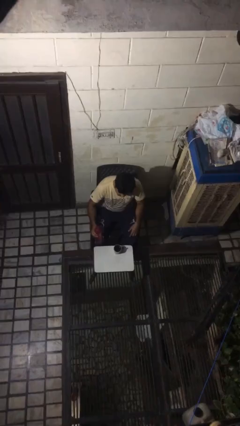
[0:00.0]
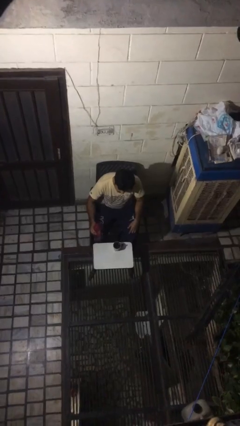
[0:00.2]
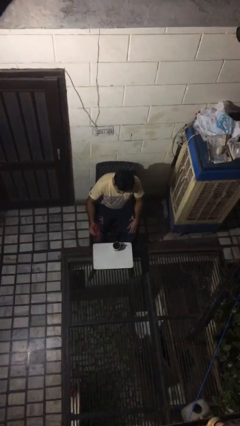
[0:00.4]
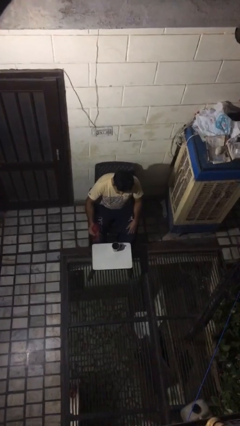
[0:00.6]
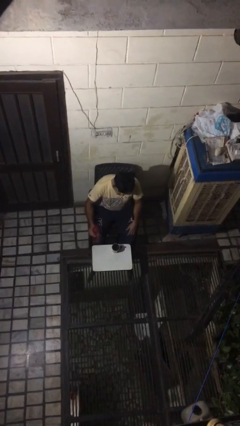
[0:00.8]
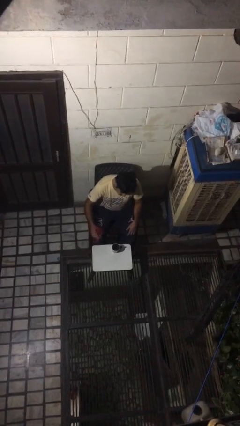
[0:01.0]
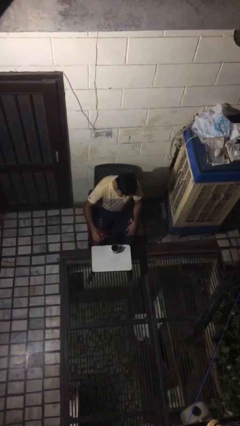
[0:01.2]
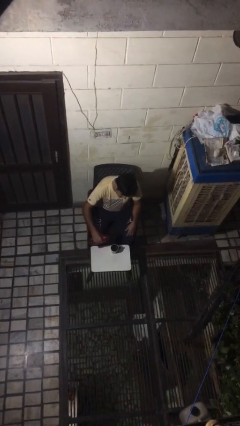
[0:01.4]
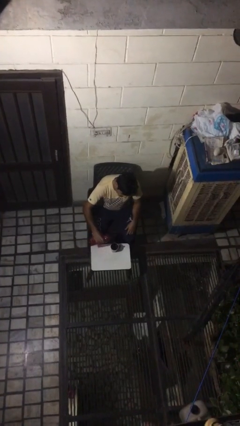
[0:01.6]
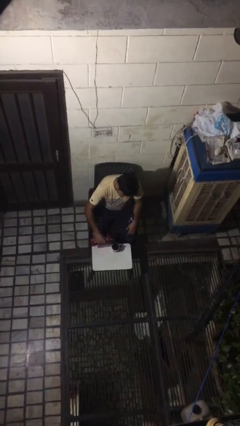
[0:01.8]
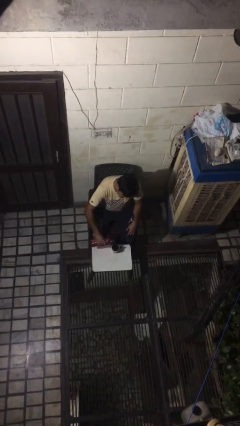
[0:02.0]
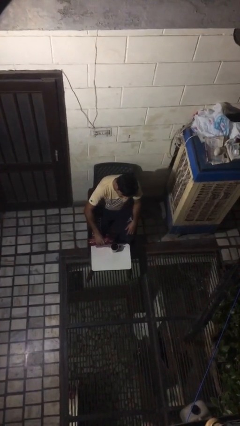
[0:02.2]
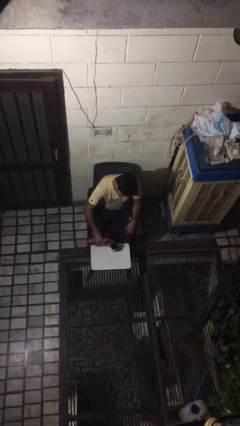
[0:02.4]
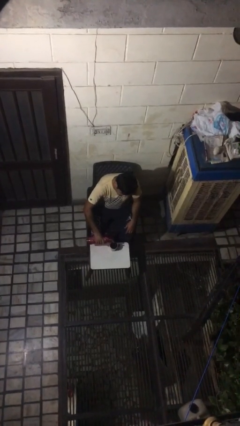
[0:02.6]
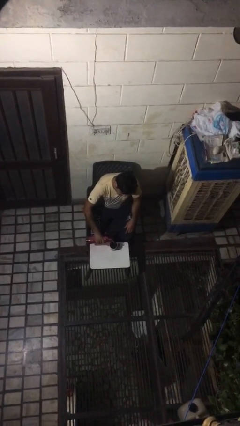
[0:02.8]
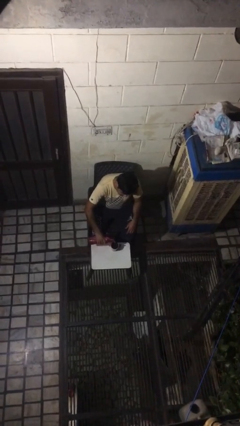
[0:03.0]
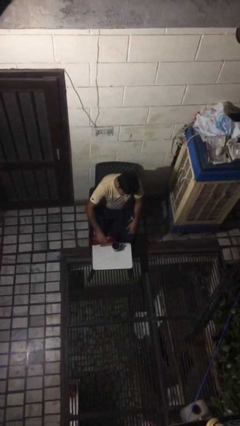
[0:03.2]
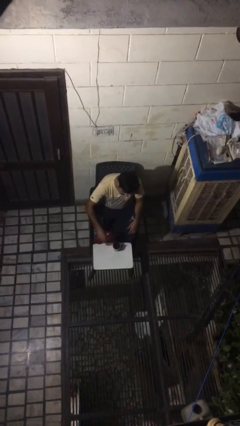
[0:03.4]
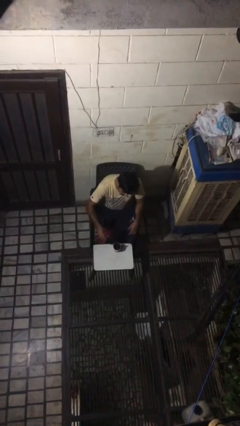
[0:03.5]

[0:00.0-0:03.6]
person pours liquid into cup

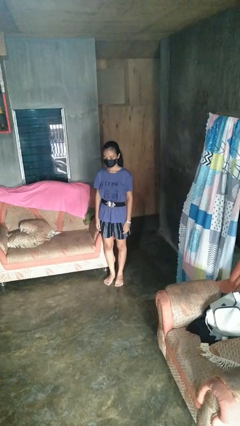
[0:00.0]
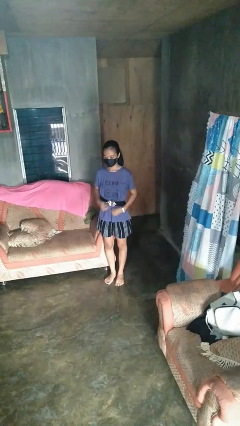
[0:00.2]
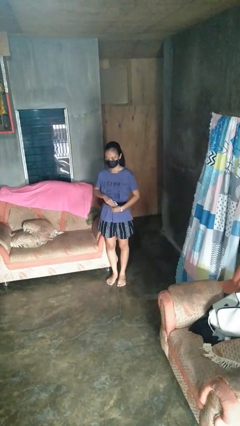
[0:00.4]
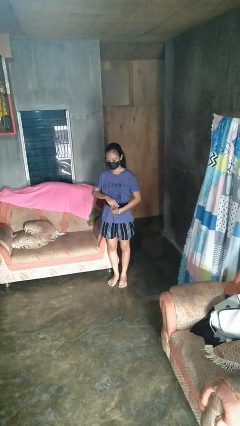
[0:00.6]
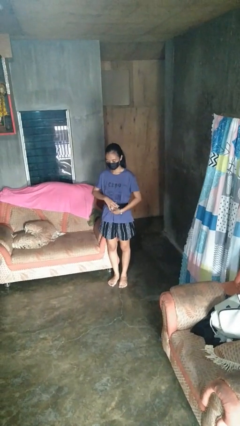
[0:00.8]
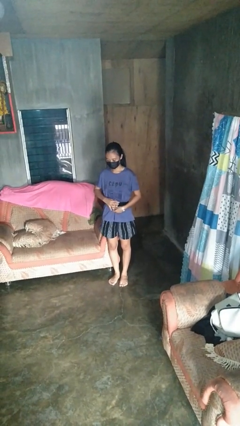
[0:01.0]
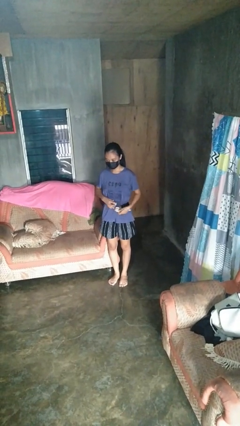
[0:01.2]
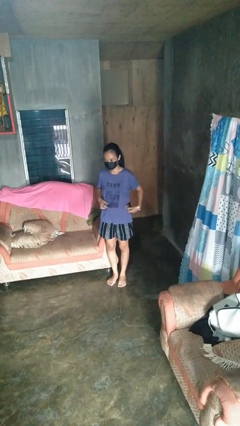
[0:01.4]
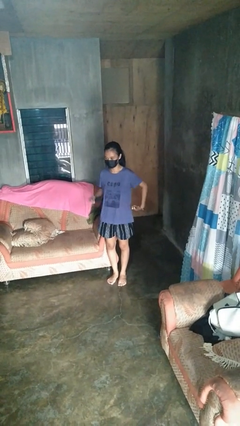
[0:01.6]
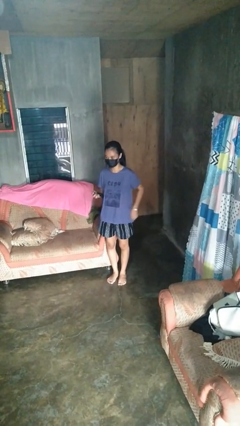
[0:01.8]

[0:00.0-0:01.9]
person takes off belt

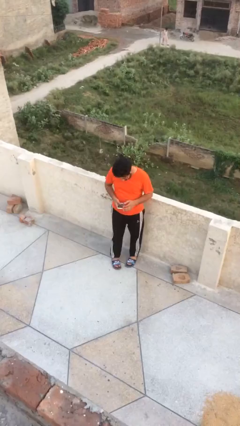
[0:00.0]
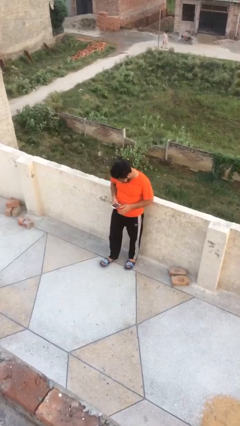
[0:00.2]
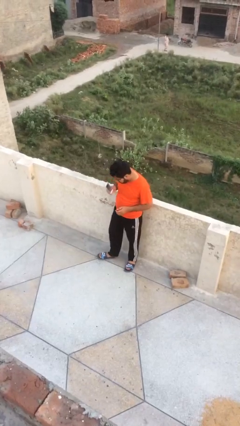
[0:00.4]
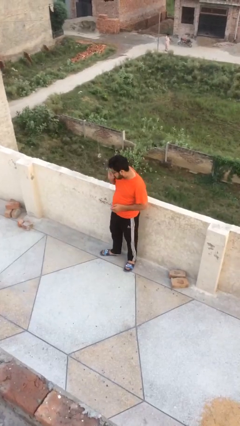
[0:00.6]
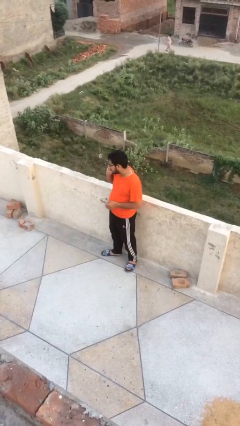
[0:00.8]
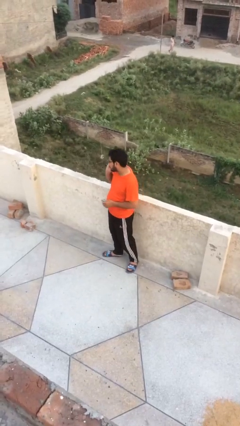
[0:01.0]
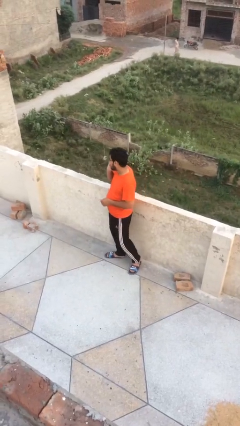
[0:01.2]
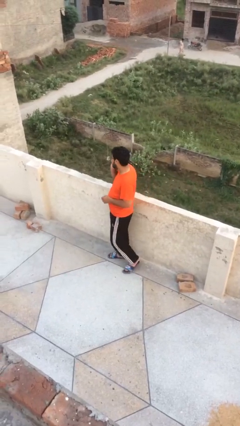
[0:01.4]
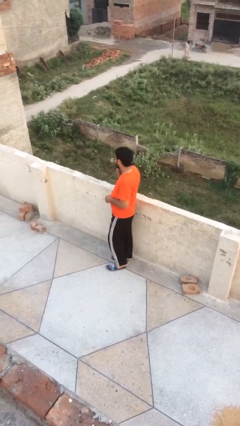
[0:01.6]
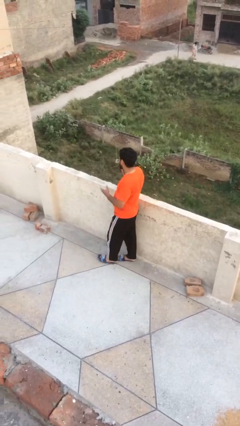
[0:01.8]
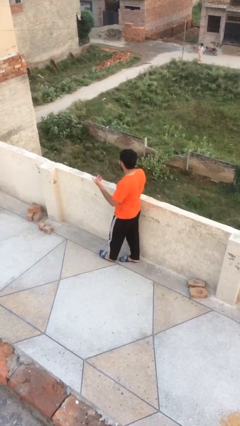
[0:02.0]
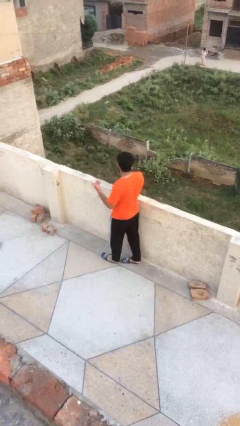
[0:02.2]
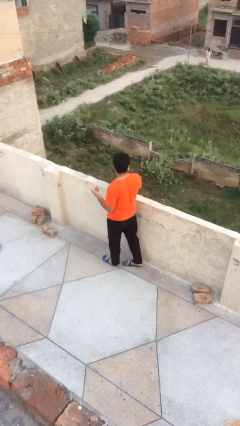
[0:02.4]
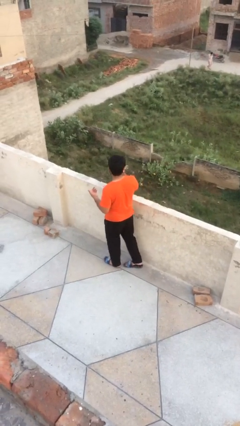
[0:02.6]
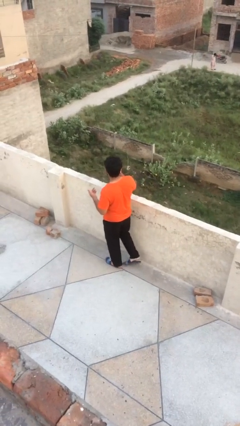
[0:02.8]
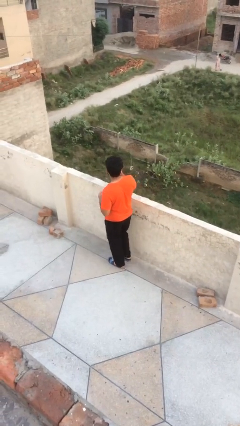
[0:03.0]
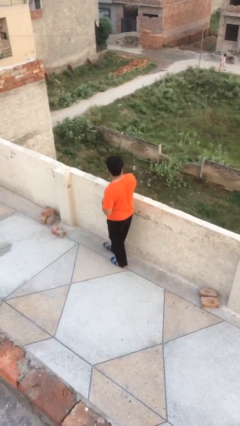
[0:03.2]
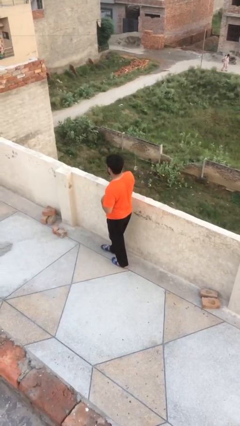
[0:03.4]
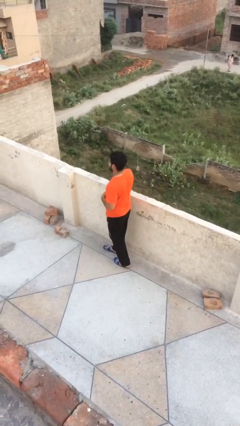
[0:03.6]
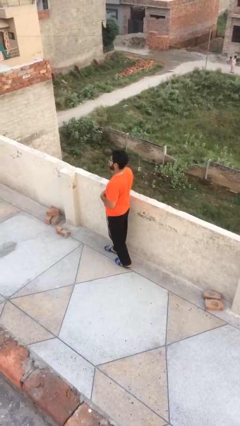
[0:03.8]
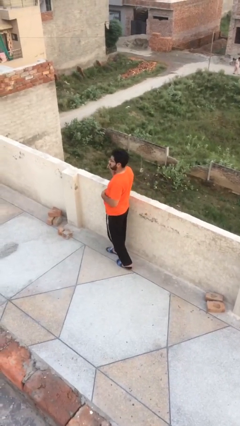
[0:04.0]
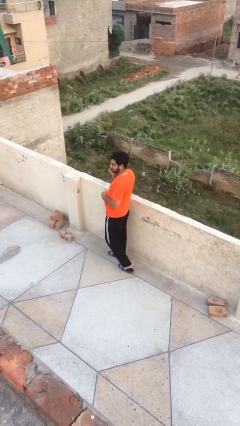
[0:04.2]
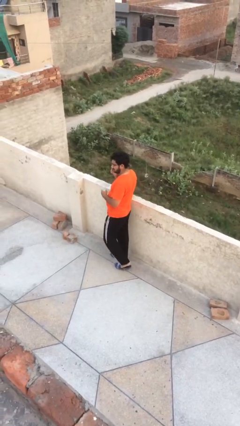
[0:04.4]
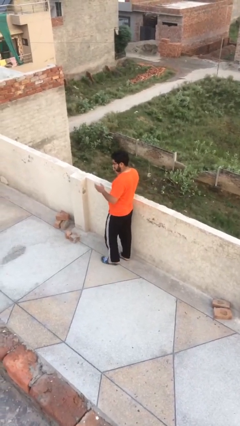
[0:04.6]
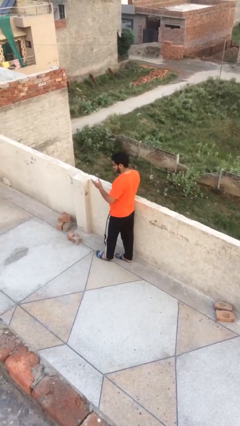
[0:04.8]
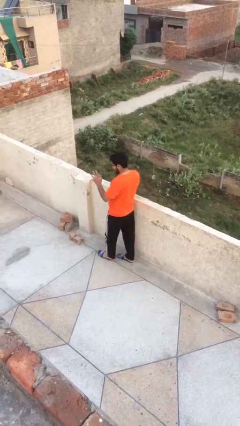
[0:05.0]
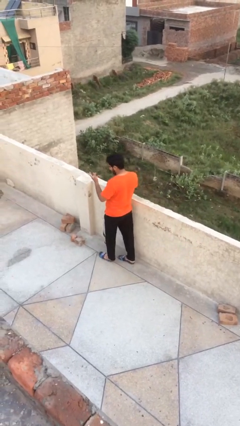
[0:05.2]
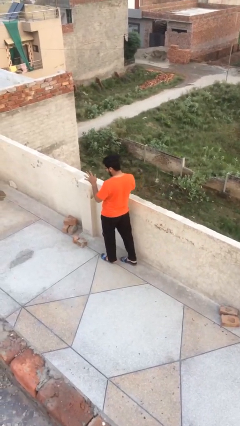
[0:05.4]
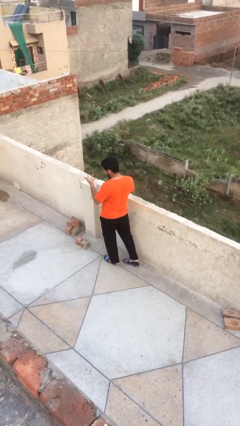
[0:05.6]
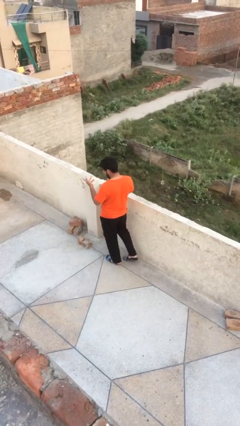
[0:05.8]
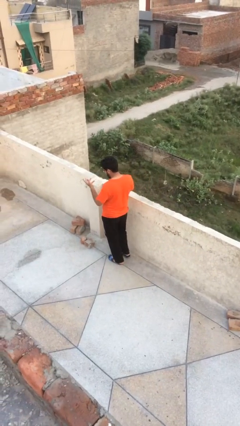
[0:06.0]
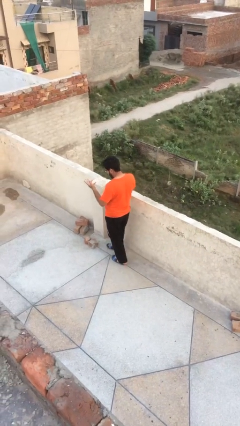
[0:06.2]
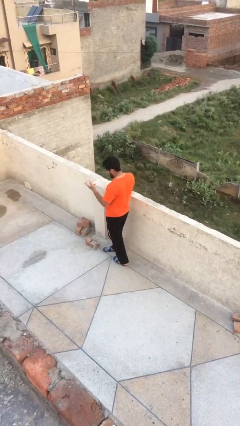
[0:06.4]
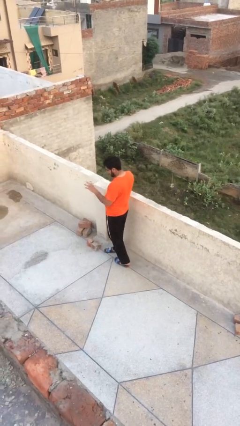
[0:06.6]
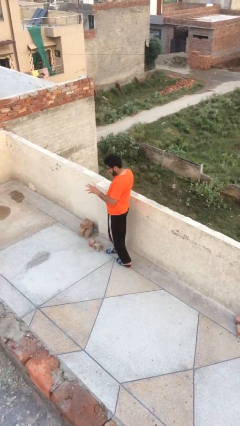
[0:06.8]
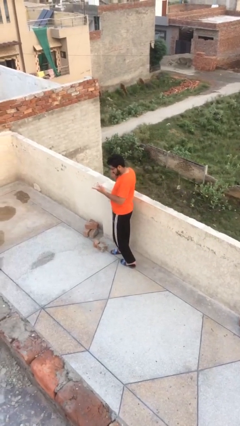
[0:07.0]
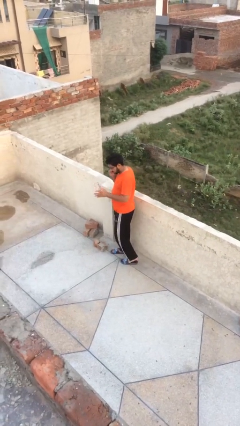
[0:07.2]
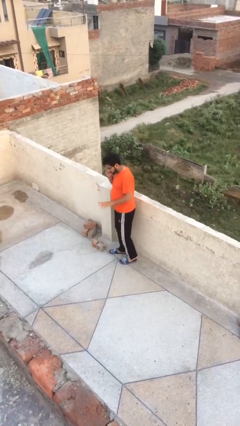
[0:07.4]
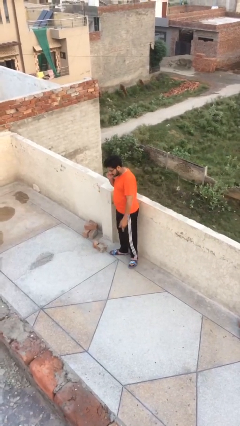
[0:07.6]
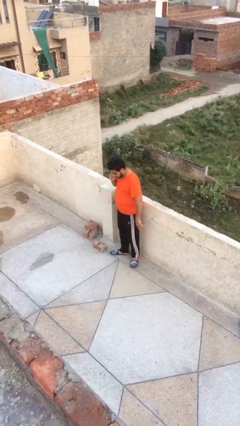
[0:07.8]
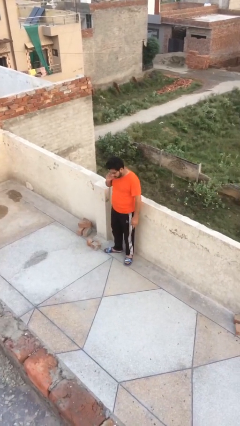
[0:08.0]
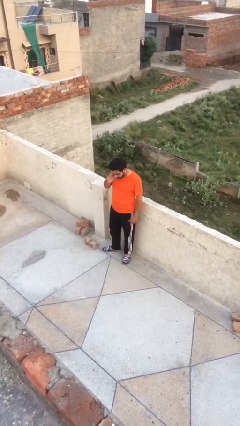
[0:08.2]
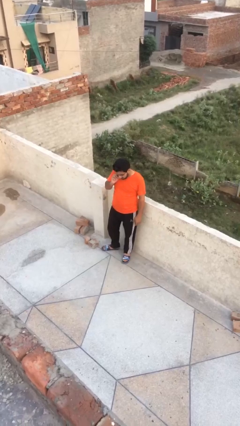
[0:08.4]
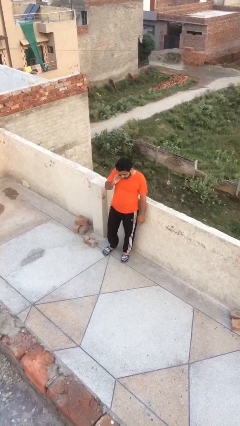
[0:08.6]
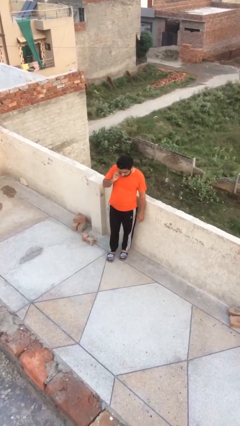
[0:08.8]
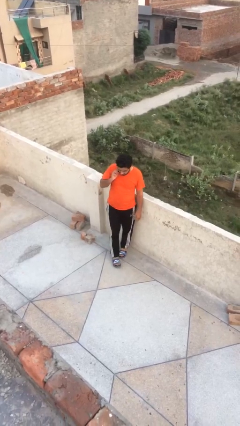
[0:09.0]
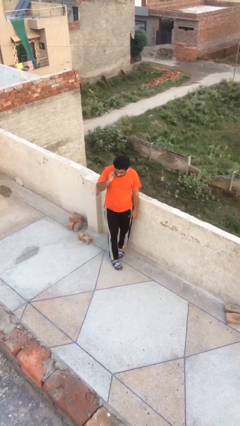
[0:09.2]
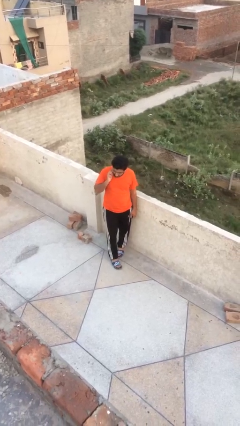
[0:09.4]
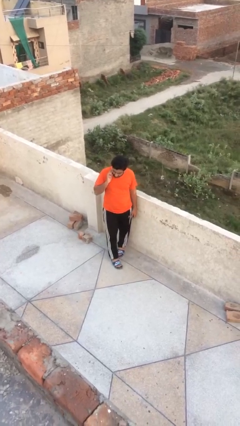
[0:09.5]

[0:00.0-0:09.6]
person talks on phone

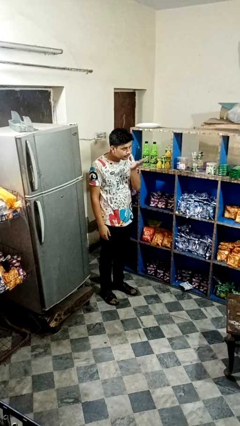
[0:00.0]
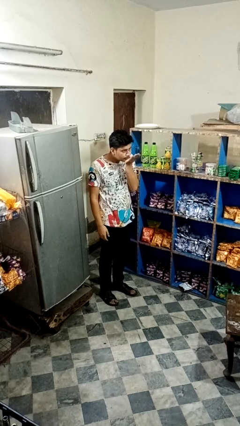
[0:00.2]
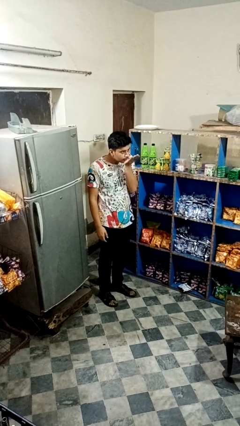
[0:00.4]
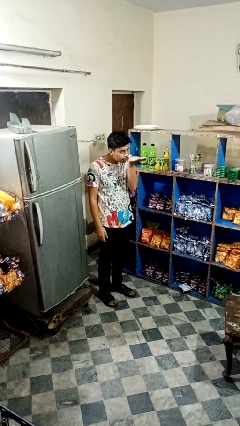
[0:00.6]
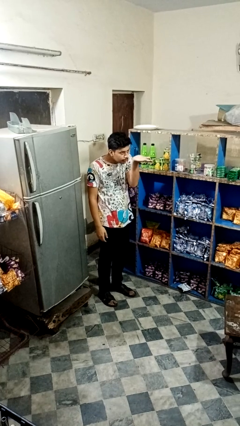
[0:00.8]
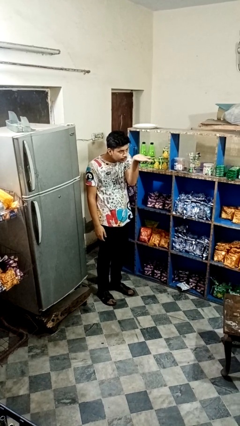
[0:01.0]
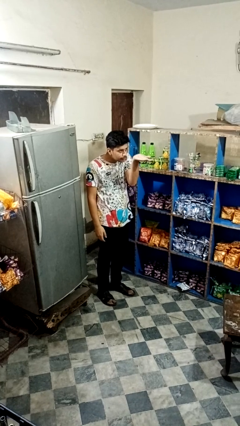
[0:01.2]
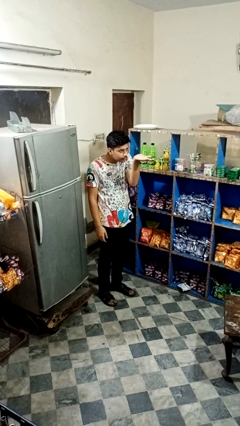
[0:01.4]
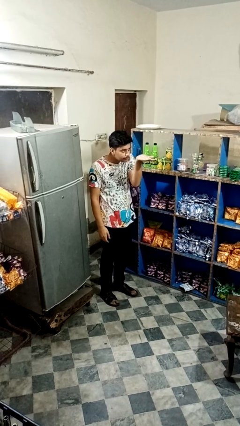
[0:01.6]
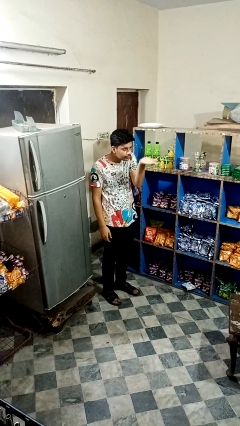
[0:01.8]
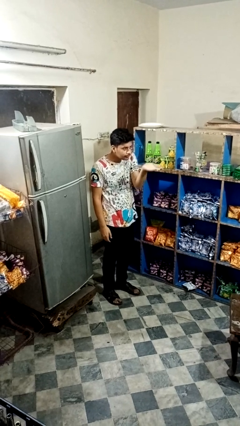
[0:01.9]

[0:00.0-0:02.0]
person gestures blow kiss

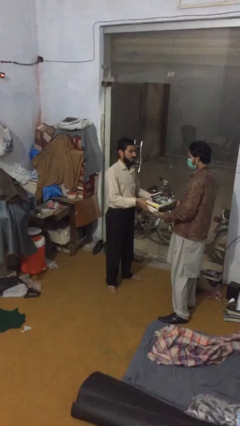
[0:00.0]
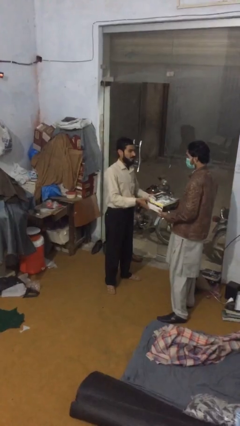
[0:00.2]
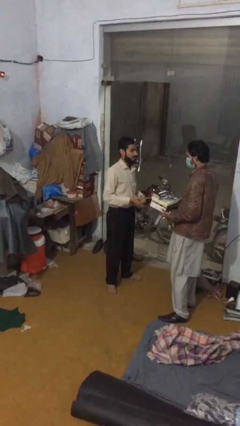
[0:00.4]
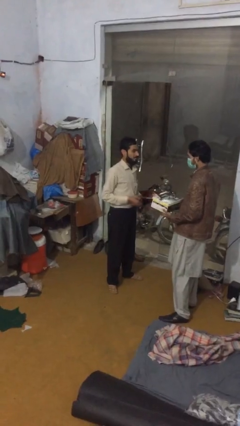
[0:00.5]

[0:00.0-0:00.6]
person transfers object to person
